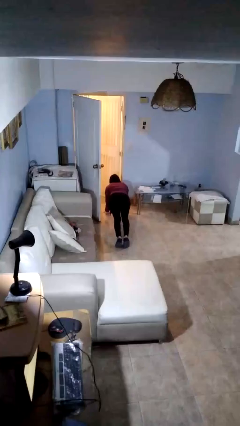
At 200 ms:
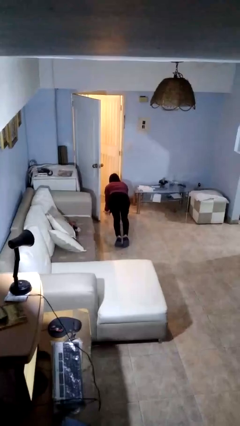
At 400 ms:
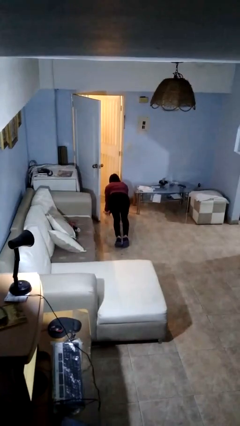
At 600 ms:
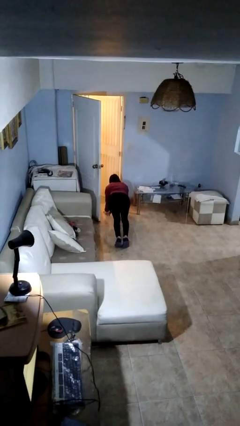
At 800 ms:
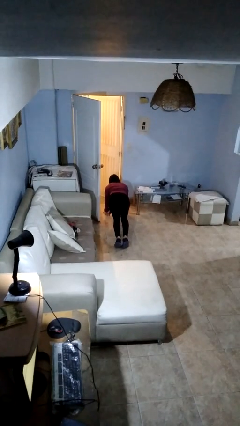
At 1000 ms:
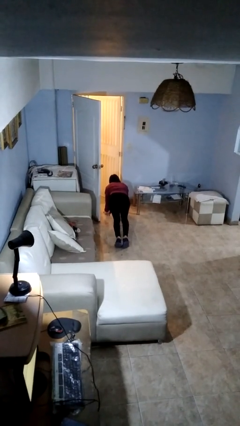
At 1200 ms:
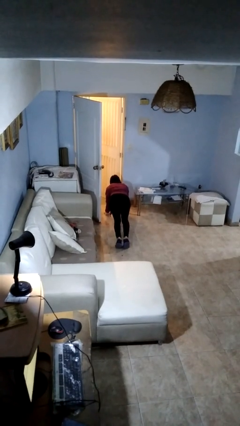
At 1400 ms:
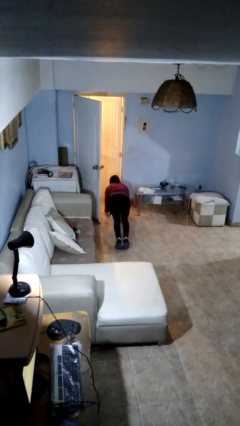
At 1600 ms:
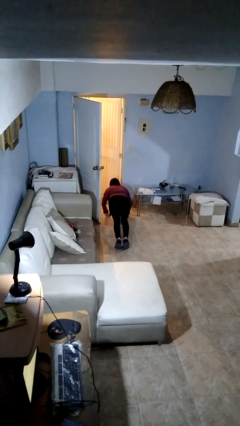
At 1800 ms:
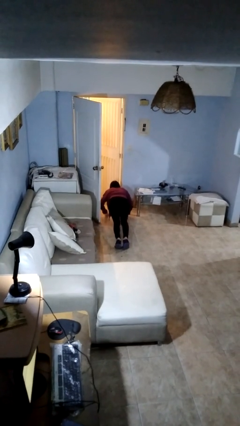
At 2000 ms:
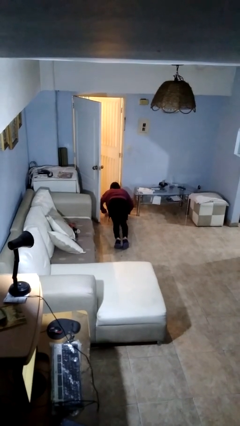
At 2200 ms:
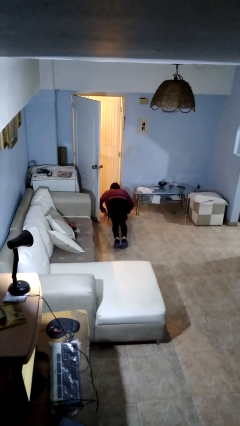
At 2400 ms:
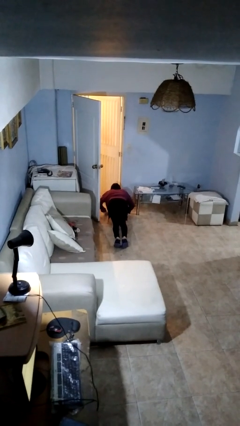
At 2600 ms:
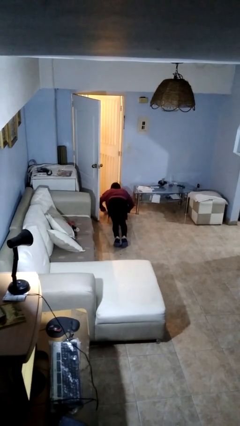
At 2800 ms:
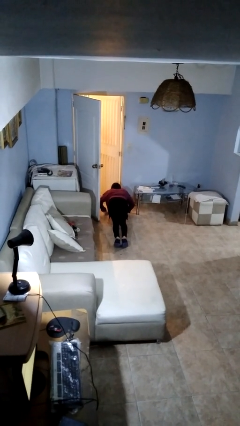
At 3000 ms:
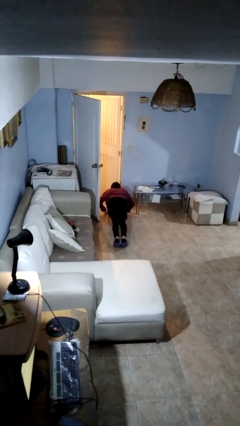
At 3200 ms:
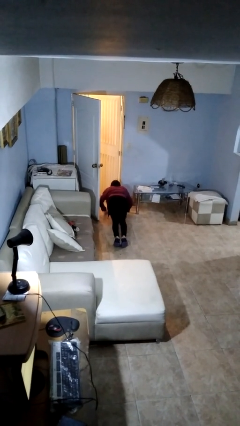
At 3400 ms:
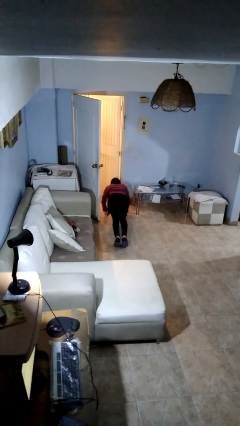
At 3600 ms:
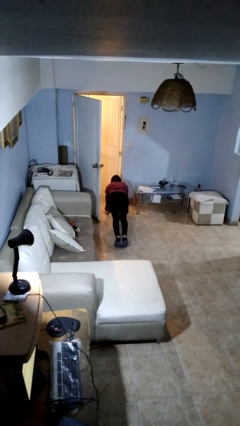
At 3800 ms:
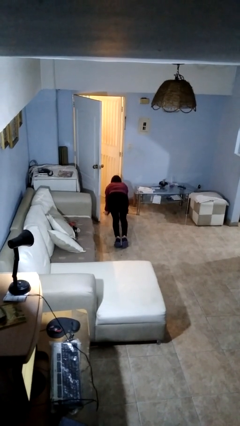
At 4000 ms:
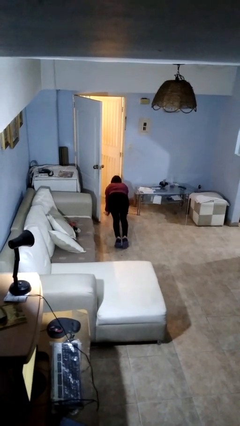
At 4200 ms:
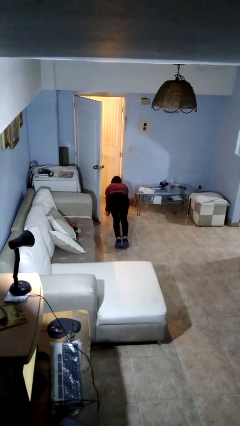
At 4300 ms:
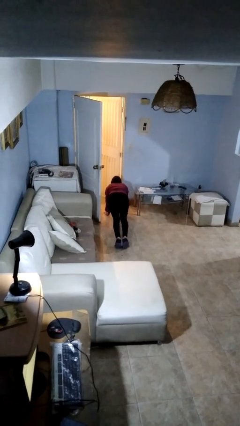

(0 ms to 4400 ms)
person exercises with pushup

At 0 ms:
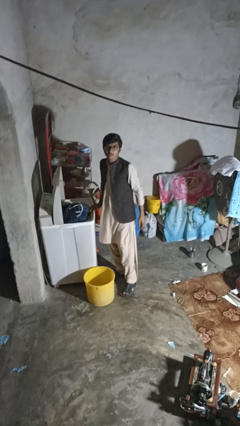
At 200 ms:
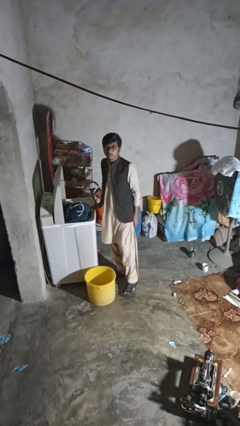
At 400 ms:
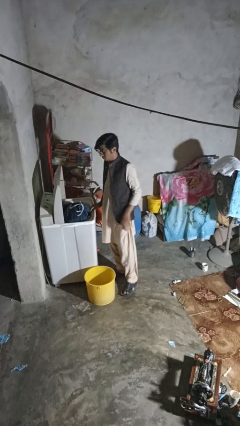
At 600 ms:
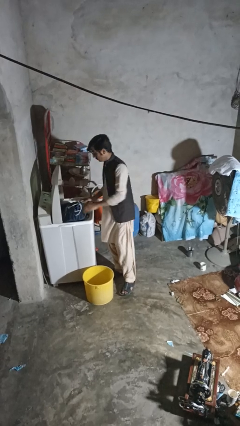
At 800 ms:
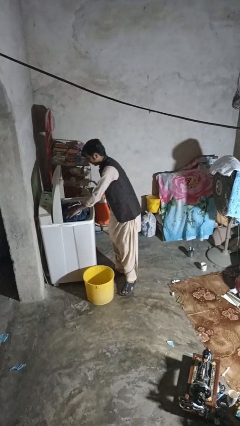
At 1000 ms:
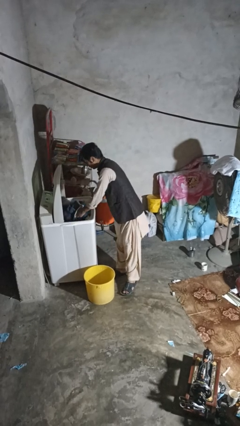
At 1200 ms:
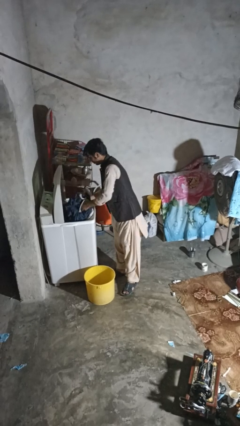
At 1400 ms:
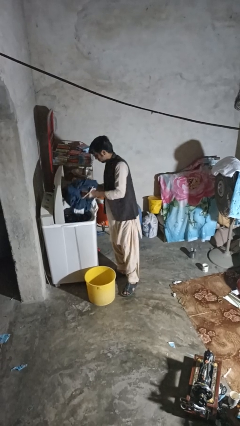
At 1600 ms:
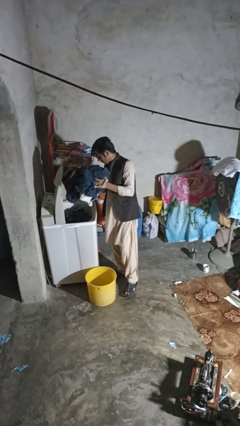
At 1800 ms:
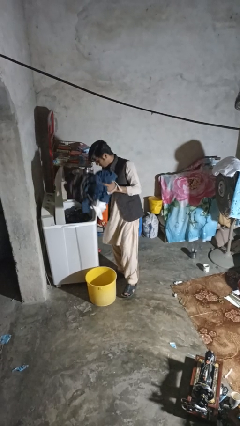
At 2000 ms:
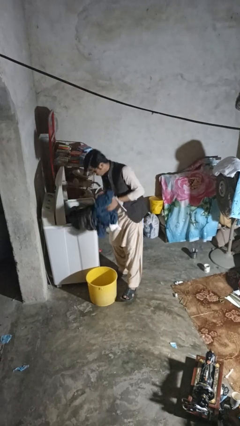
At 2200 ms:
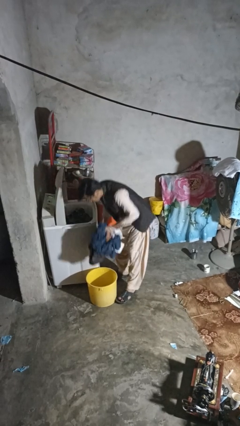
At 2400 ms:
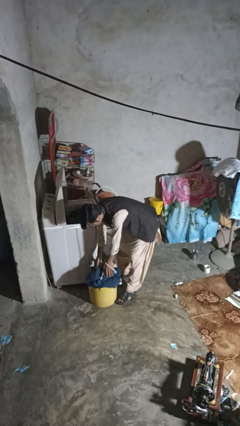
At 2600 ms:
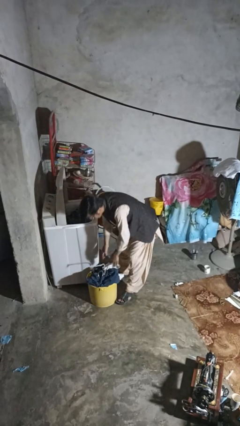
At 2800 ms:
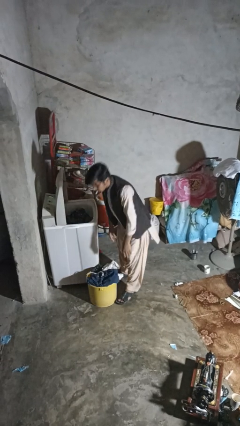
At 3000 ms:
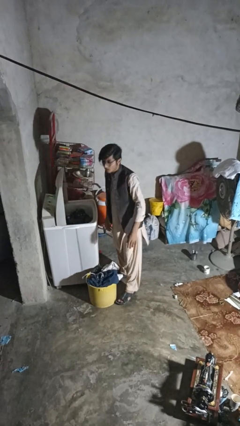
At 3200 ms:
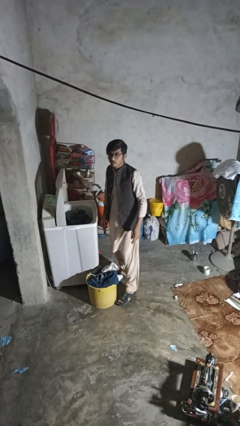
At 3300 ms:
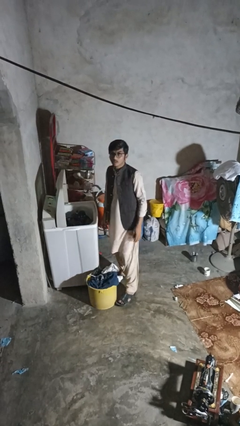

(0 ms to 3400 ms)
person unloads dryer

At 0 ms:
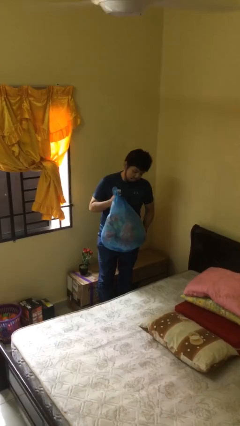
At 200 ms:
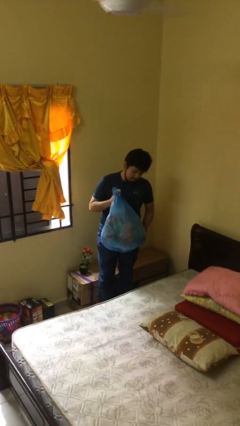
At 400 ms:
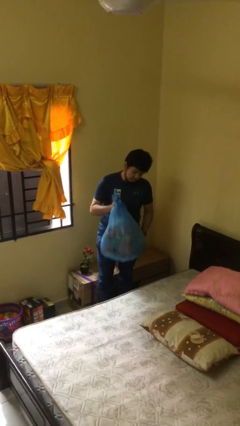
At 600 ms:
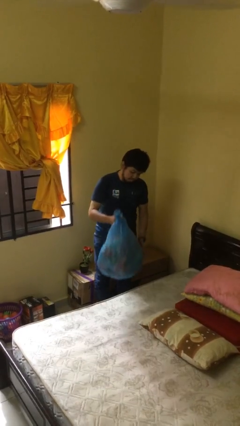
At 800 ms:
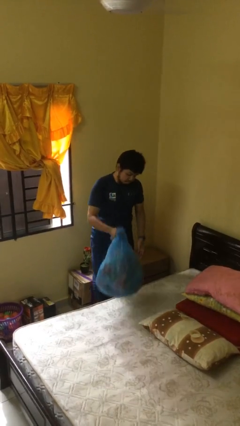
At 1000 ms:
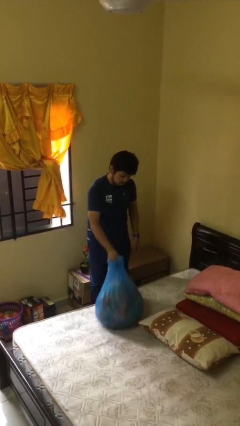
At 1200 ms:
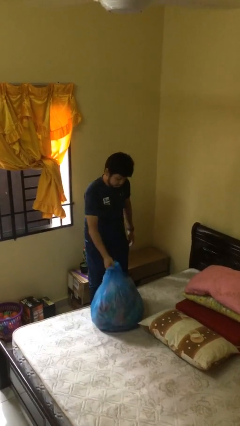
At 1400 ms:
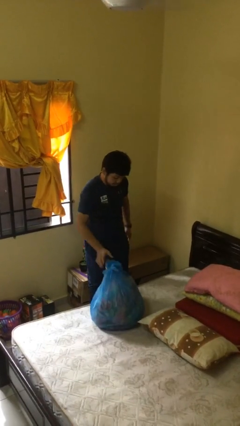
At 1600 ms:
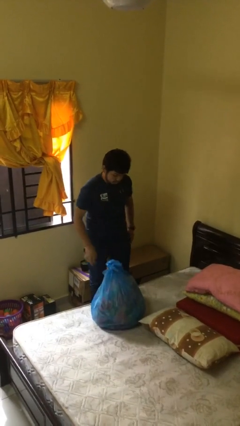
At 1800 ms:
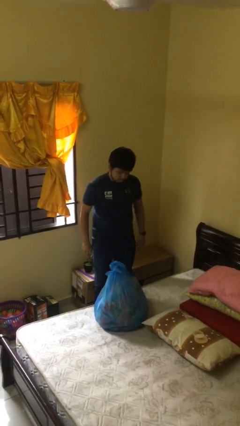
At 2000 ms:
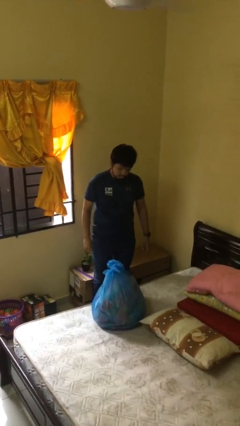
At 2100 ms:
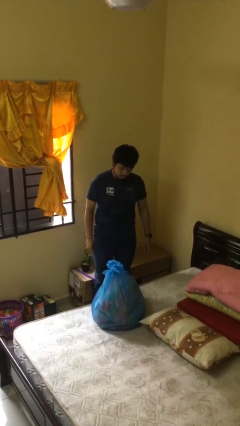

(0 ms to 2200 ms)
person puts down object on bed

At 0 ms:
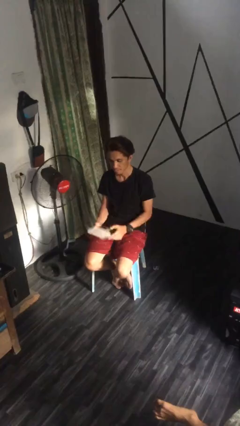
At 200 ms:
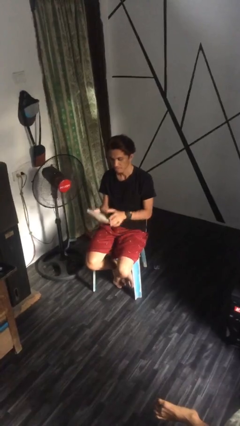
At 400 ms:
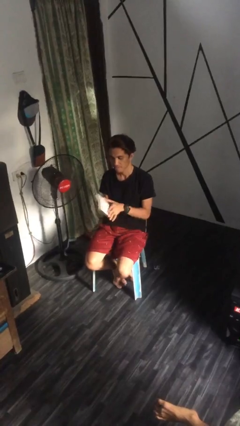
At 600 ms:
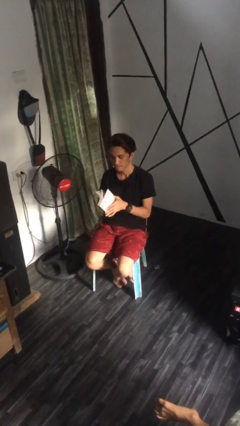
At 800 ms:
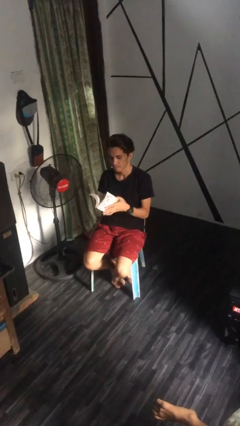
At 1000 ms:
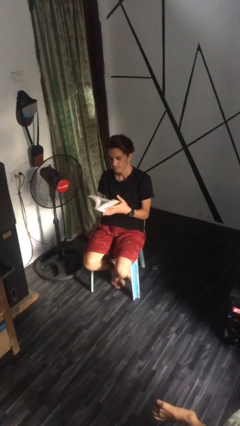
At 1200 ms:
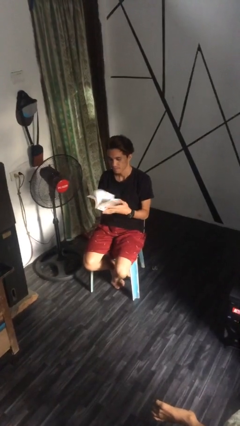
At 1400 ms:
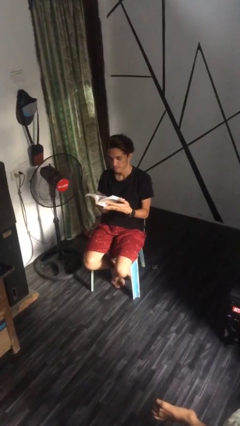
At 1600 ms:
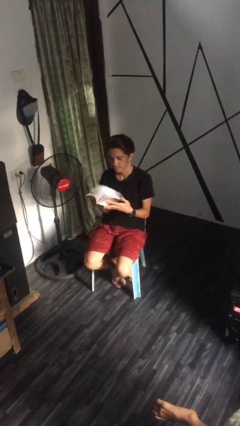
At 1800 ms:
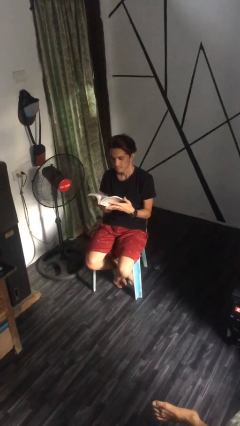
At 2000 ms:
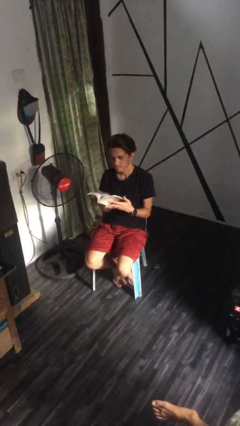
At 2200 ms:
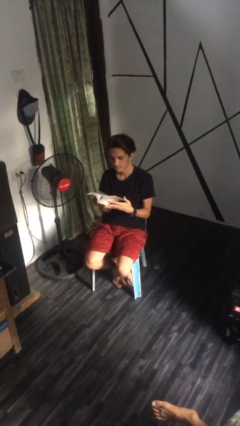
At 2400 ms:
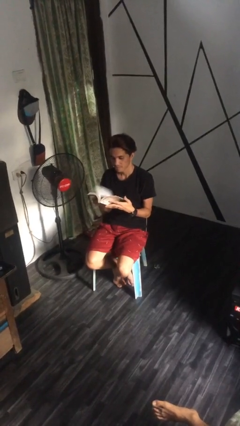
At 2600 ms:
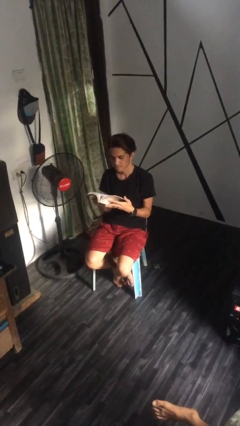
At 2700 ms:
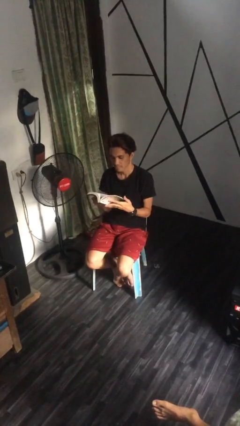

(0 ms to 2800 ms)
person reads document

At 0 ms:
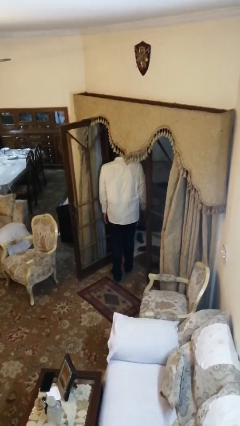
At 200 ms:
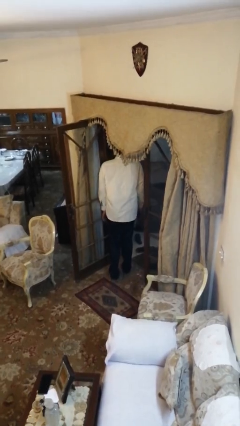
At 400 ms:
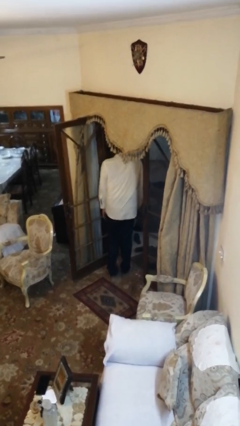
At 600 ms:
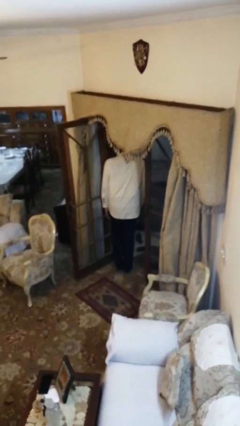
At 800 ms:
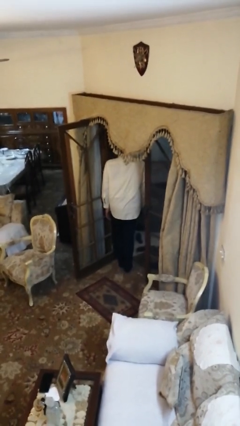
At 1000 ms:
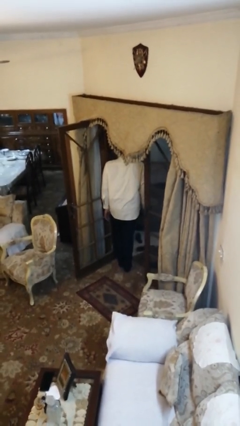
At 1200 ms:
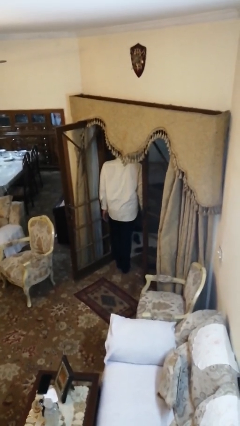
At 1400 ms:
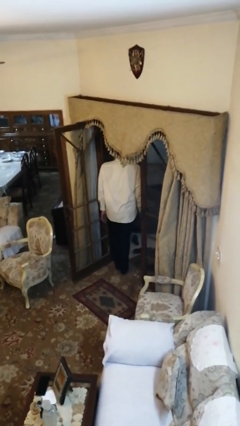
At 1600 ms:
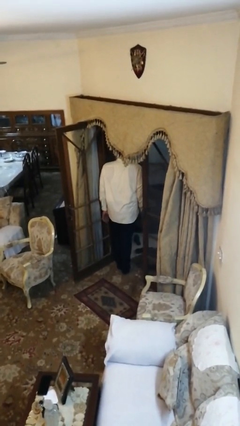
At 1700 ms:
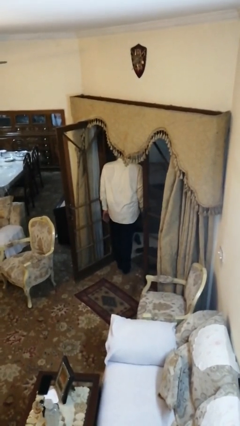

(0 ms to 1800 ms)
person bumps into wall

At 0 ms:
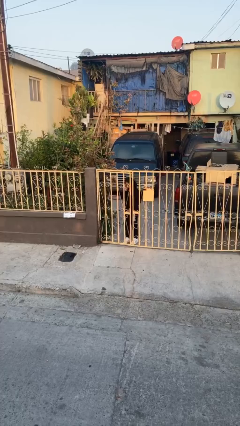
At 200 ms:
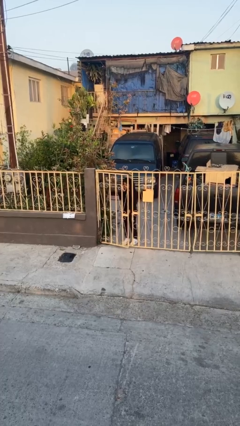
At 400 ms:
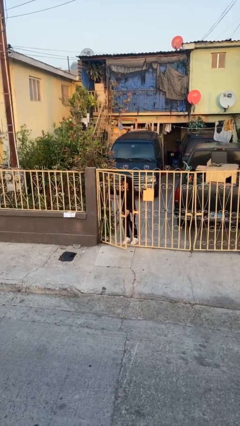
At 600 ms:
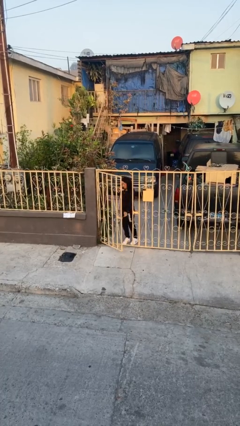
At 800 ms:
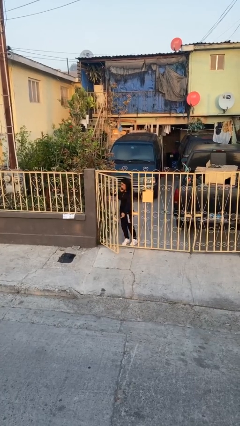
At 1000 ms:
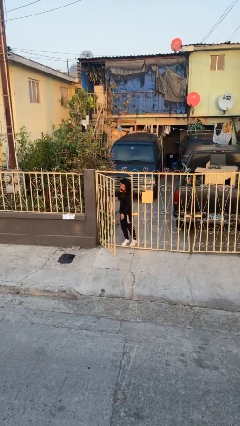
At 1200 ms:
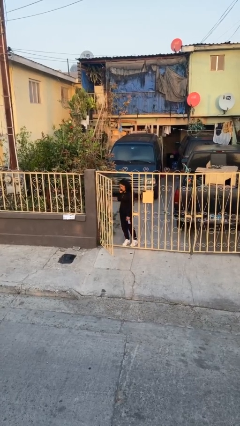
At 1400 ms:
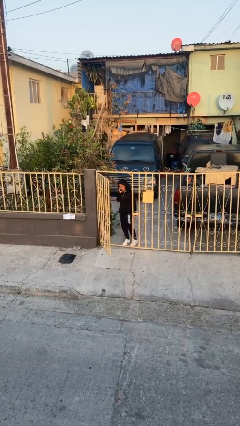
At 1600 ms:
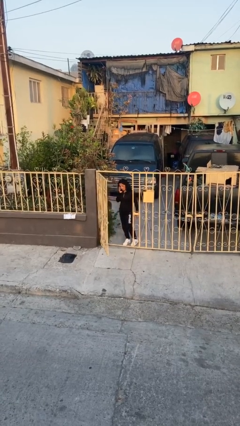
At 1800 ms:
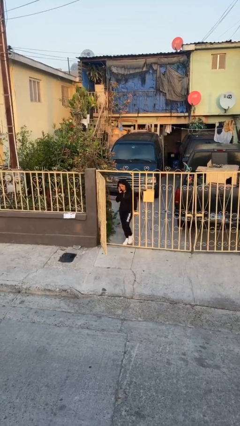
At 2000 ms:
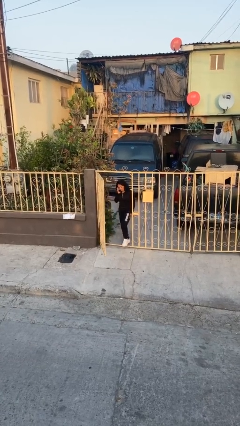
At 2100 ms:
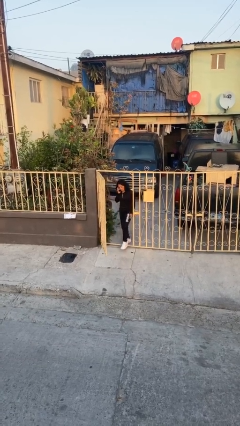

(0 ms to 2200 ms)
person opens facility door

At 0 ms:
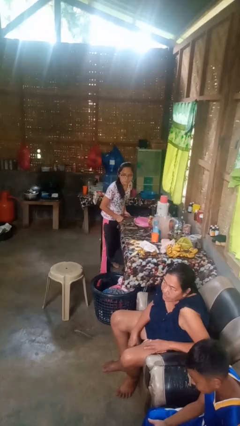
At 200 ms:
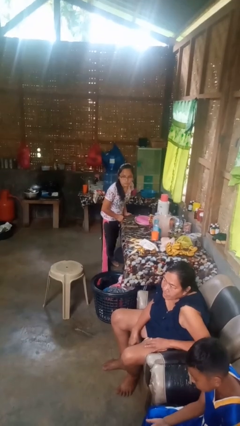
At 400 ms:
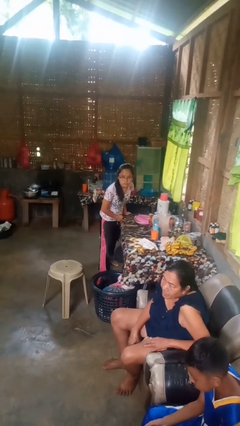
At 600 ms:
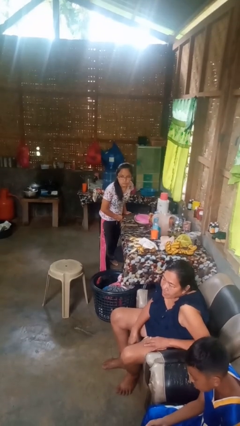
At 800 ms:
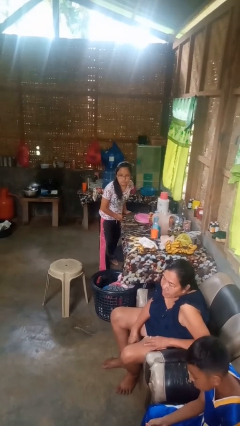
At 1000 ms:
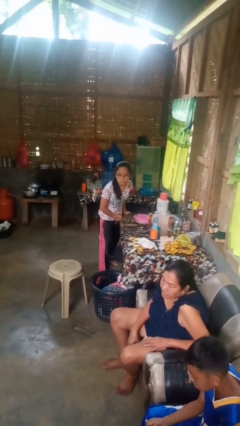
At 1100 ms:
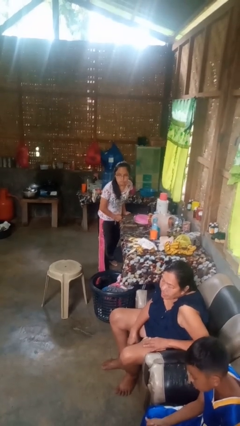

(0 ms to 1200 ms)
person bumps into table
